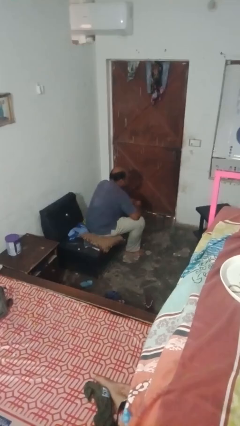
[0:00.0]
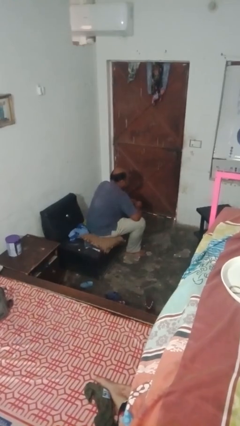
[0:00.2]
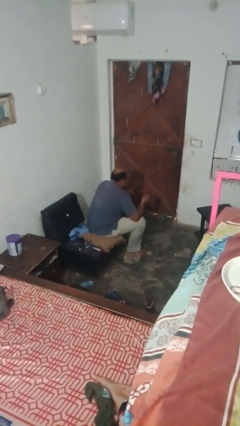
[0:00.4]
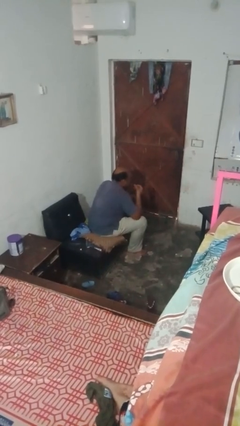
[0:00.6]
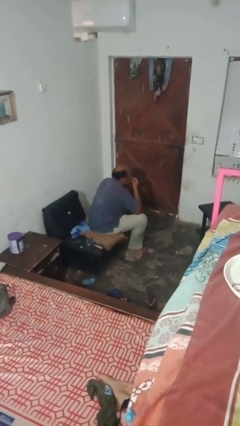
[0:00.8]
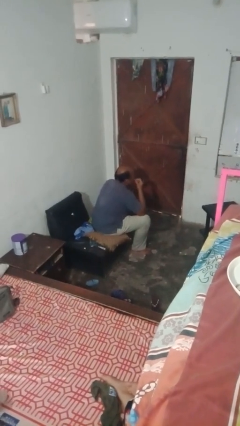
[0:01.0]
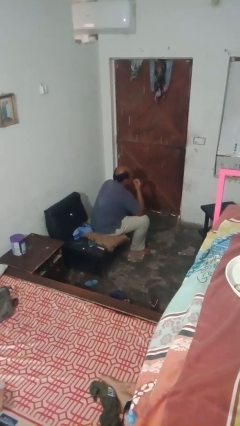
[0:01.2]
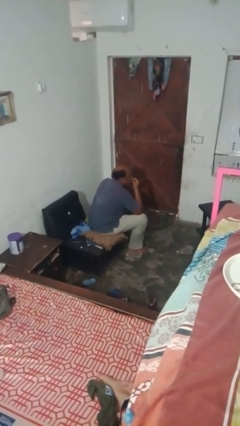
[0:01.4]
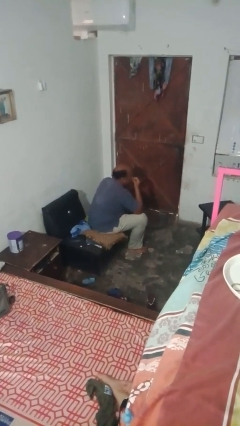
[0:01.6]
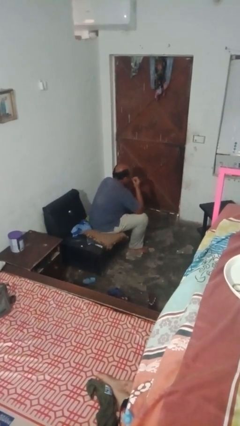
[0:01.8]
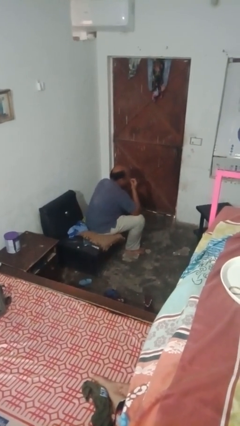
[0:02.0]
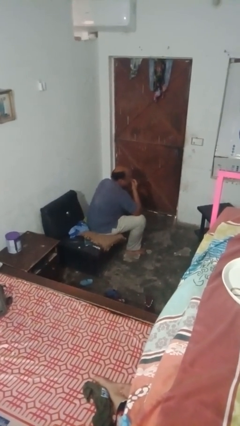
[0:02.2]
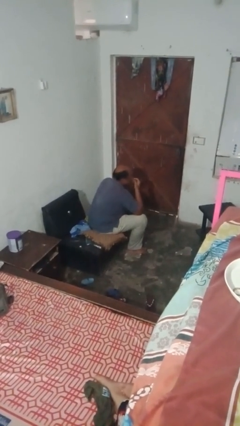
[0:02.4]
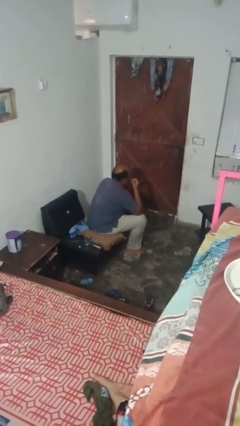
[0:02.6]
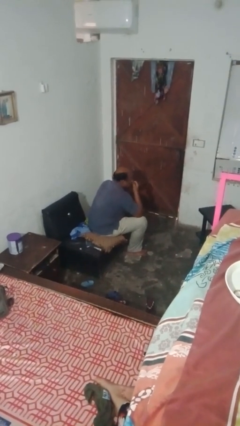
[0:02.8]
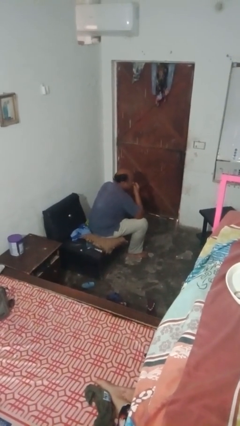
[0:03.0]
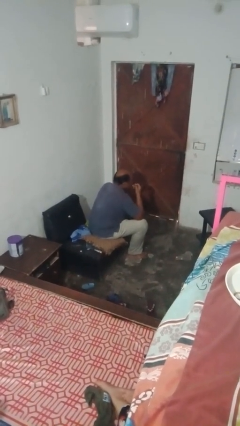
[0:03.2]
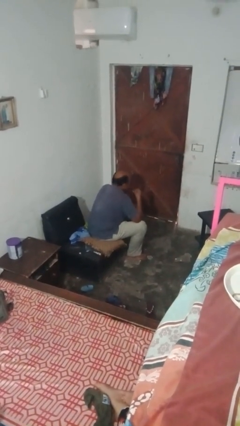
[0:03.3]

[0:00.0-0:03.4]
person applies lip makeup

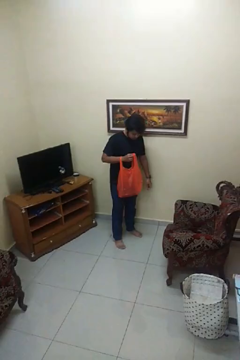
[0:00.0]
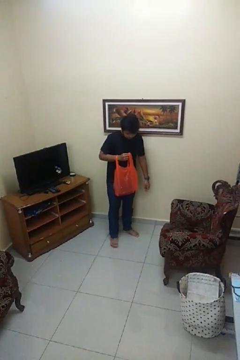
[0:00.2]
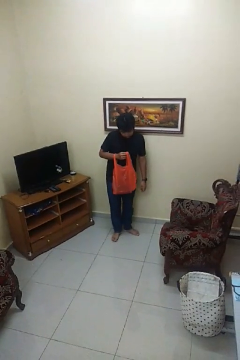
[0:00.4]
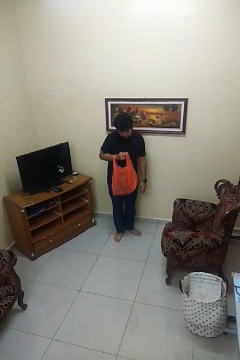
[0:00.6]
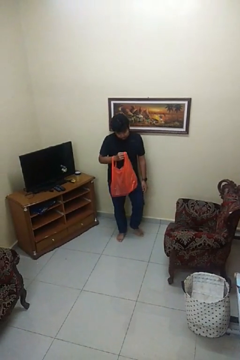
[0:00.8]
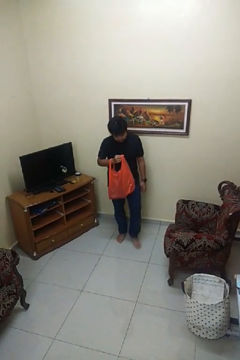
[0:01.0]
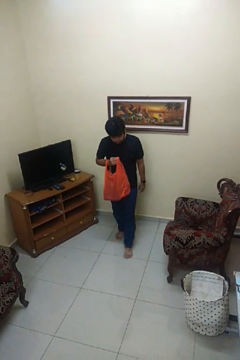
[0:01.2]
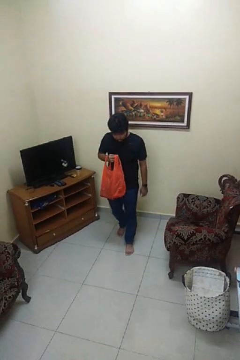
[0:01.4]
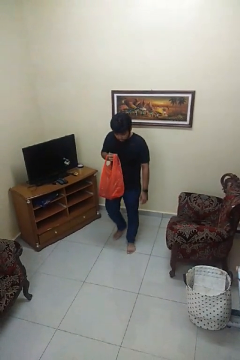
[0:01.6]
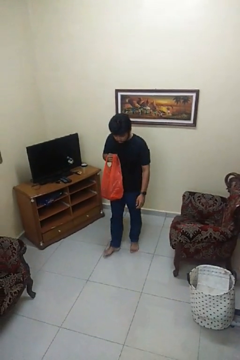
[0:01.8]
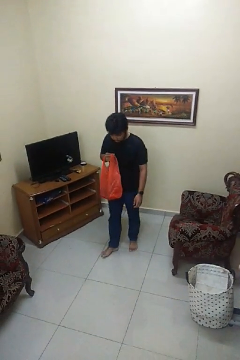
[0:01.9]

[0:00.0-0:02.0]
person carries groceries

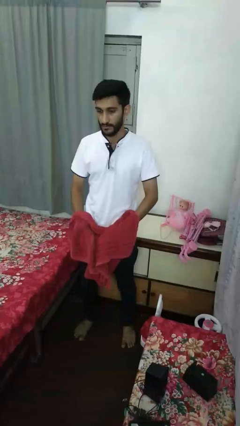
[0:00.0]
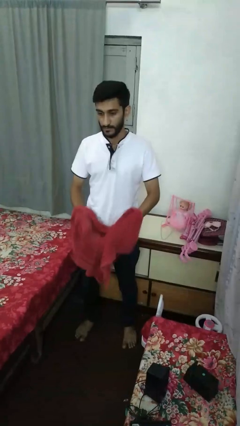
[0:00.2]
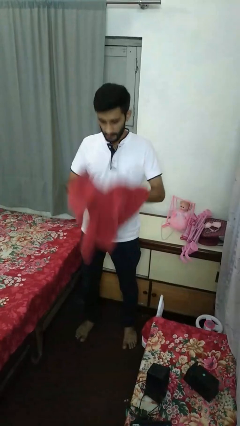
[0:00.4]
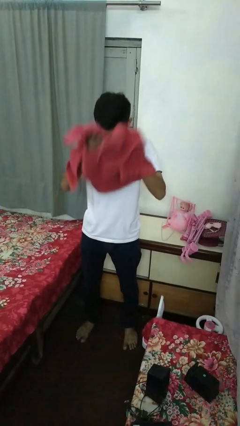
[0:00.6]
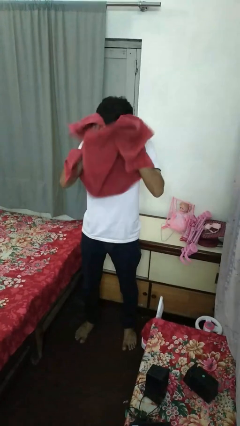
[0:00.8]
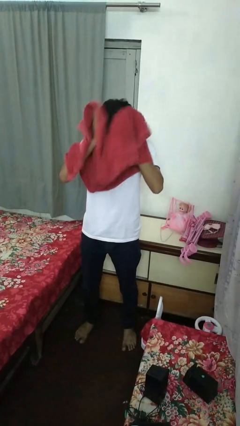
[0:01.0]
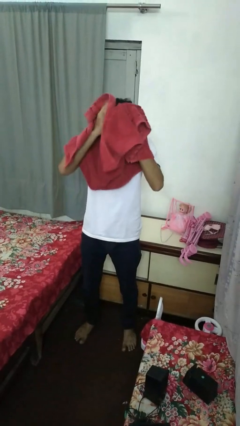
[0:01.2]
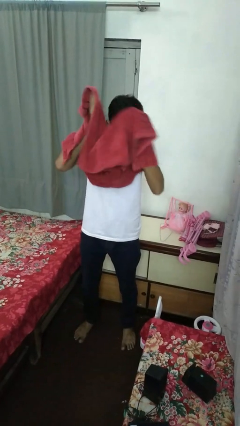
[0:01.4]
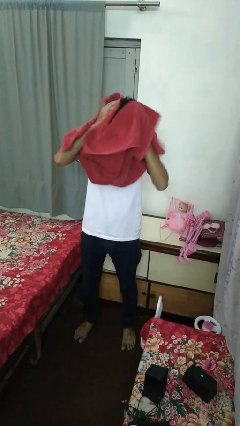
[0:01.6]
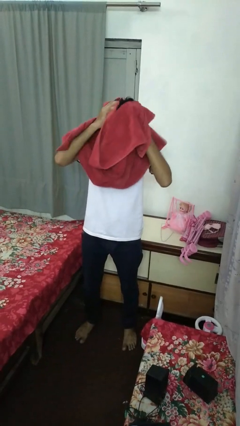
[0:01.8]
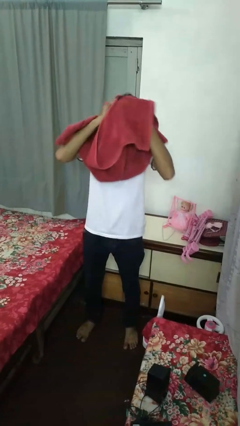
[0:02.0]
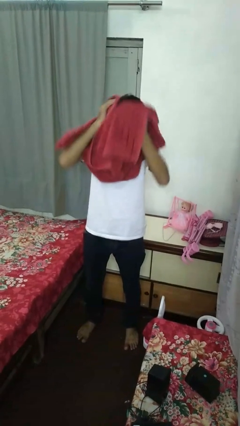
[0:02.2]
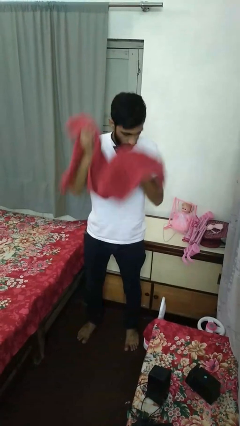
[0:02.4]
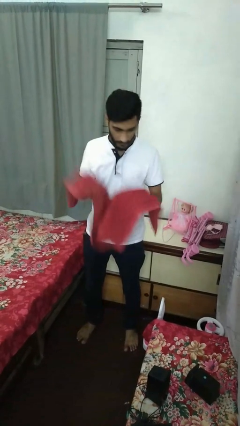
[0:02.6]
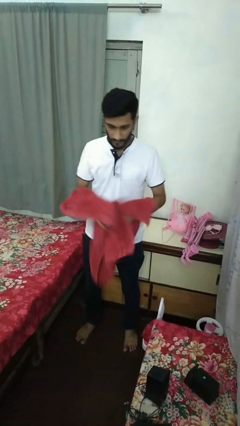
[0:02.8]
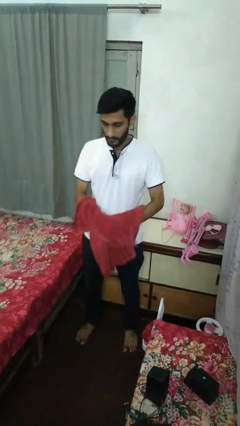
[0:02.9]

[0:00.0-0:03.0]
person dries hair with towel

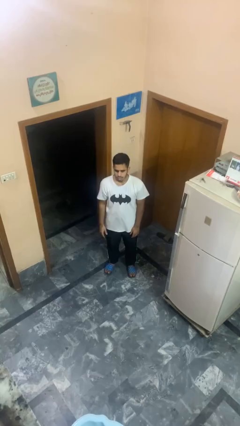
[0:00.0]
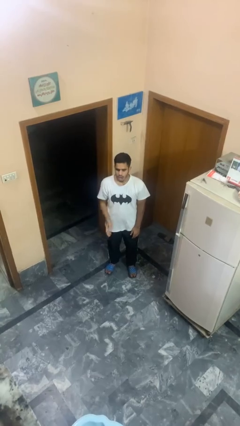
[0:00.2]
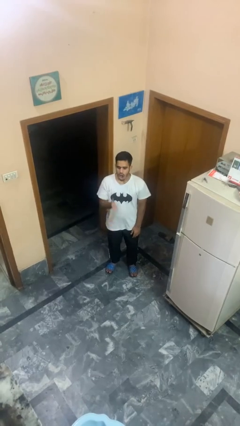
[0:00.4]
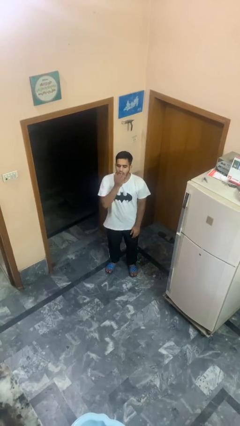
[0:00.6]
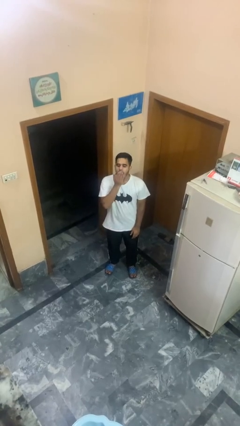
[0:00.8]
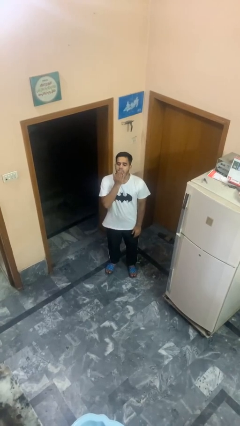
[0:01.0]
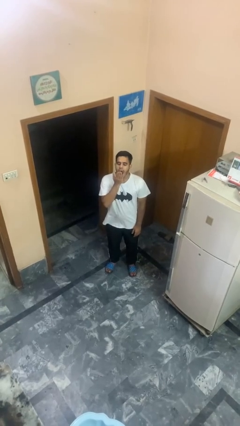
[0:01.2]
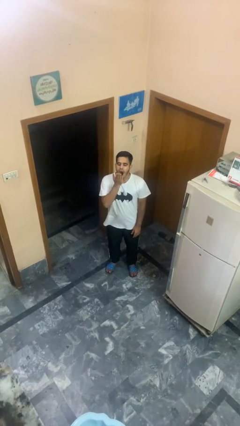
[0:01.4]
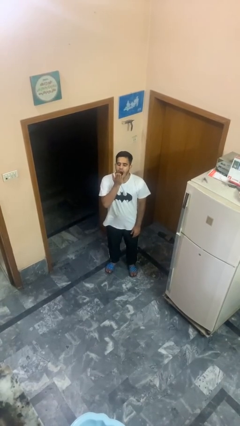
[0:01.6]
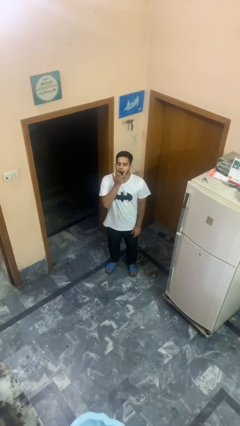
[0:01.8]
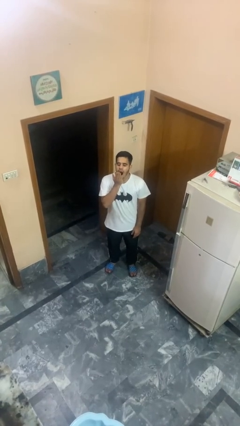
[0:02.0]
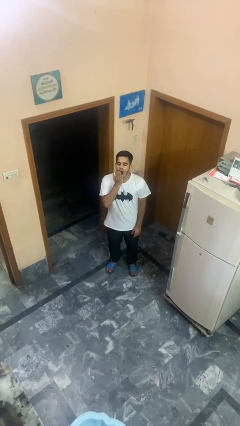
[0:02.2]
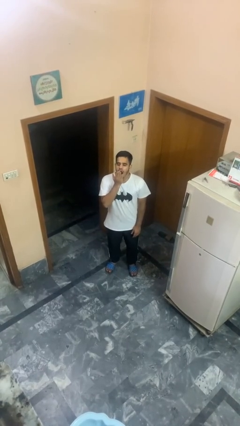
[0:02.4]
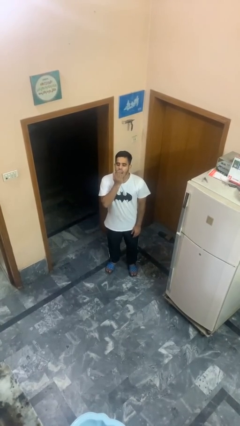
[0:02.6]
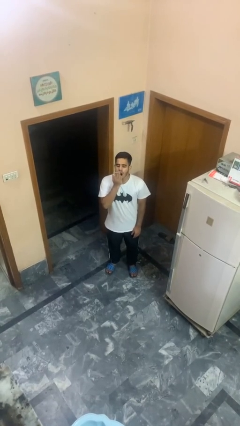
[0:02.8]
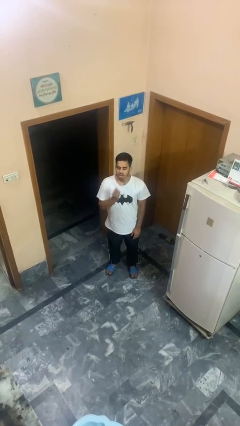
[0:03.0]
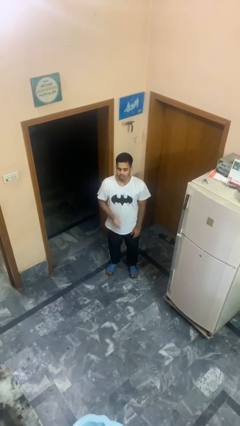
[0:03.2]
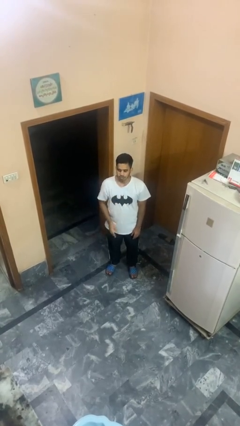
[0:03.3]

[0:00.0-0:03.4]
person yawns

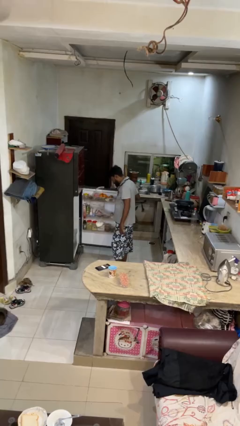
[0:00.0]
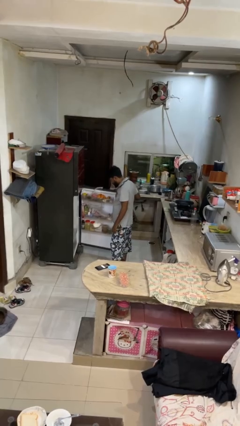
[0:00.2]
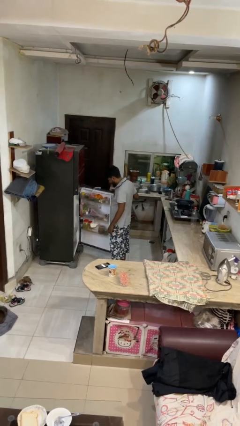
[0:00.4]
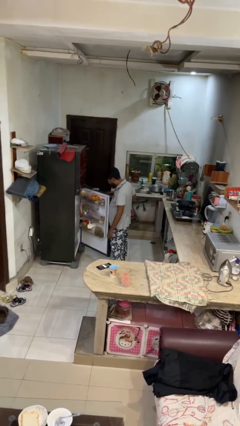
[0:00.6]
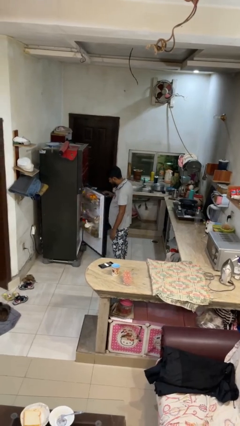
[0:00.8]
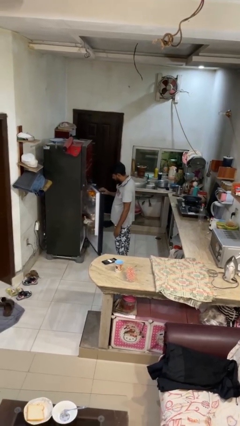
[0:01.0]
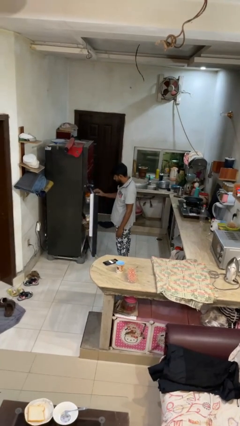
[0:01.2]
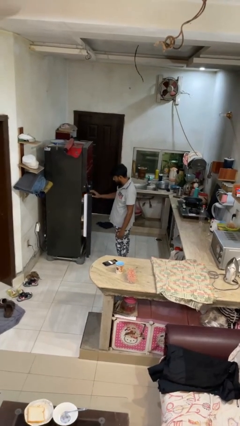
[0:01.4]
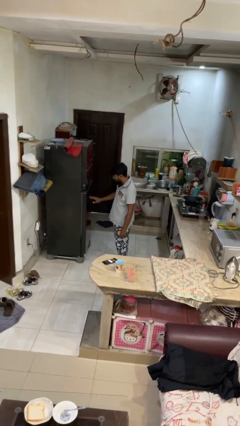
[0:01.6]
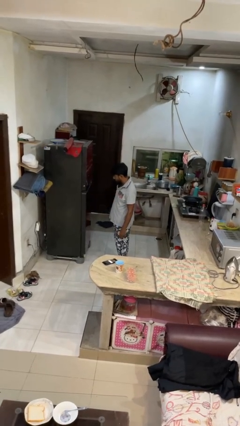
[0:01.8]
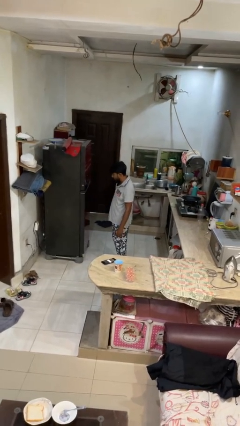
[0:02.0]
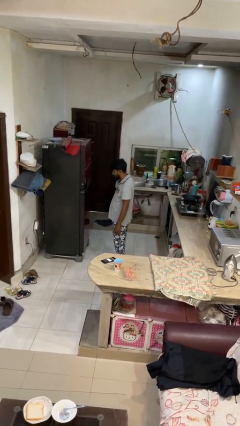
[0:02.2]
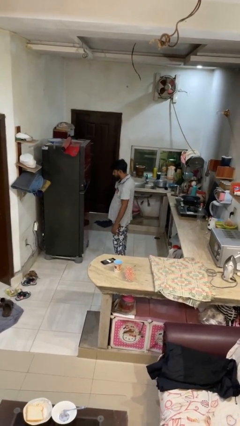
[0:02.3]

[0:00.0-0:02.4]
person closes refrigerator

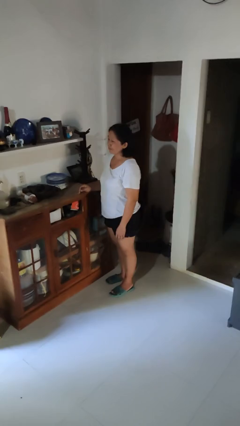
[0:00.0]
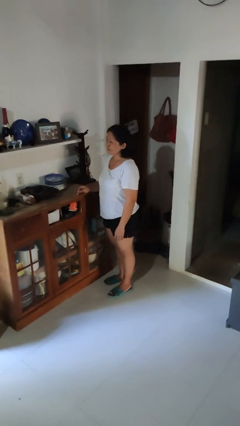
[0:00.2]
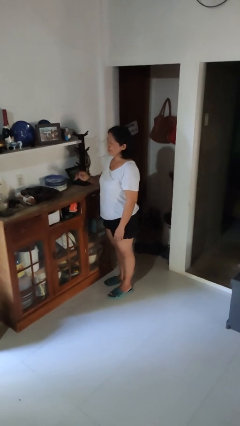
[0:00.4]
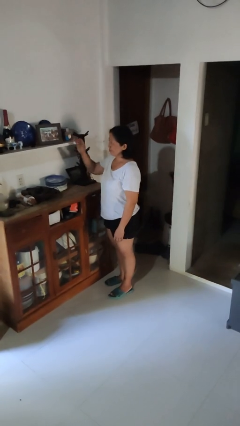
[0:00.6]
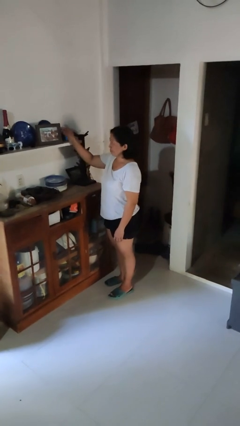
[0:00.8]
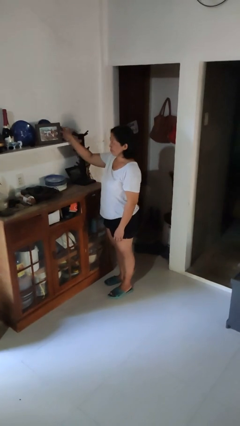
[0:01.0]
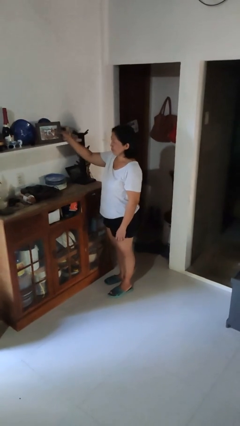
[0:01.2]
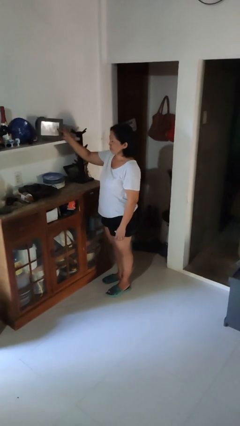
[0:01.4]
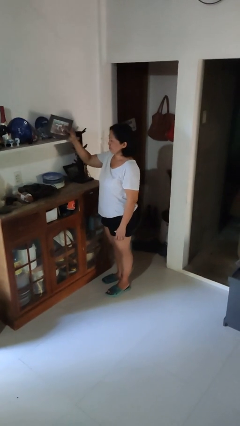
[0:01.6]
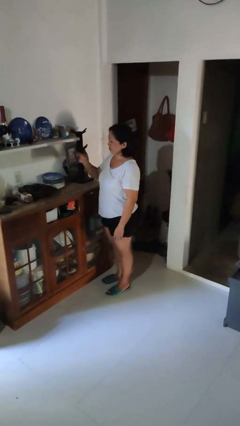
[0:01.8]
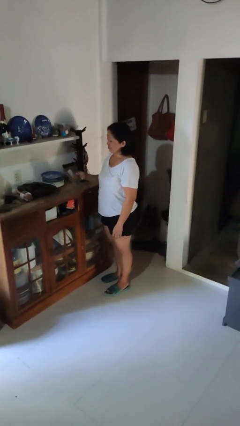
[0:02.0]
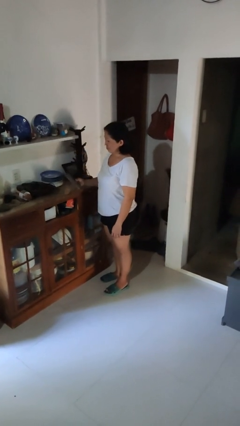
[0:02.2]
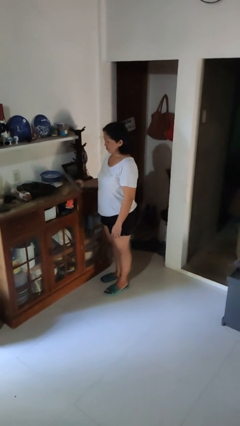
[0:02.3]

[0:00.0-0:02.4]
person picks up object from shelf

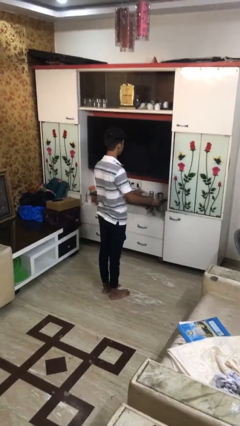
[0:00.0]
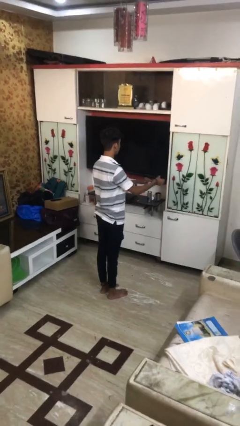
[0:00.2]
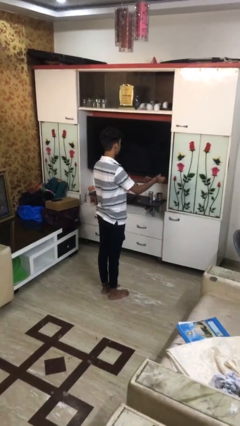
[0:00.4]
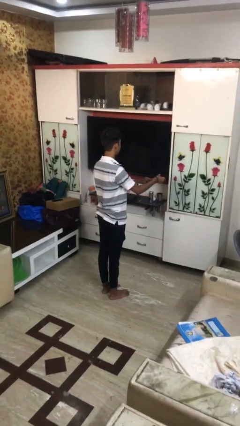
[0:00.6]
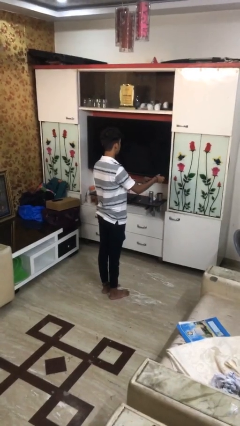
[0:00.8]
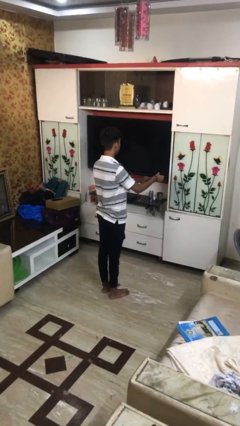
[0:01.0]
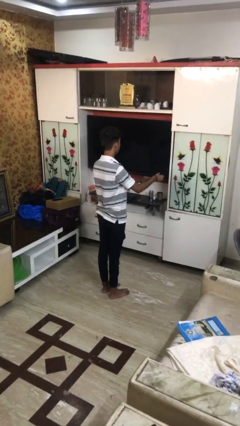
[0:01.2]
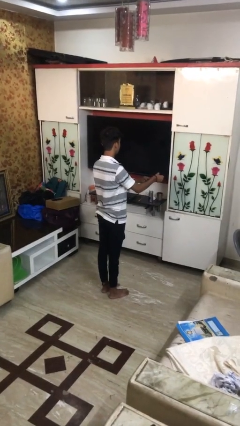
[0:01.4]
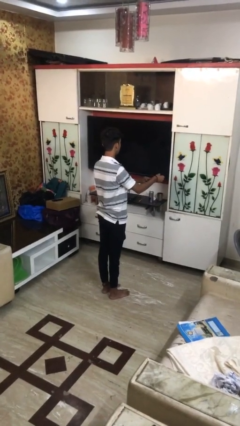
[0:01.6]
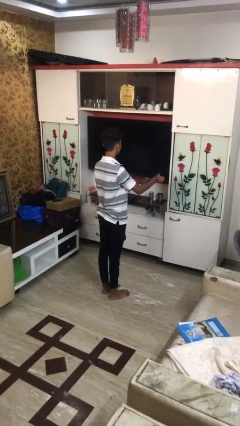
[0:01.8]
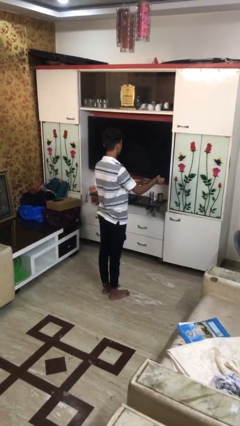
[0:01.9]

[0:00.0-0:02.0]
person clips fingernails
